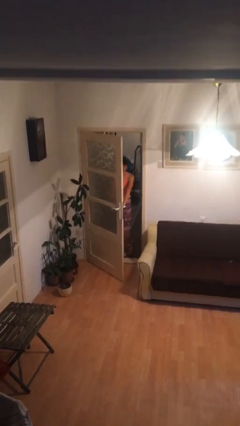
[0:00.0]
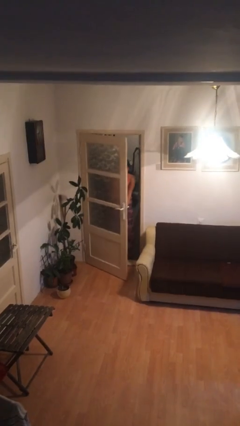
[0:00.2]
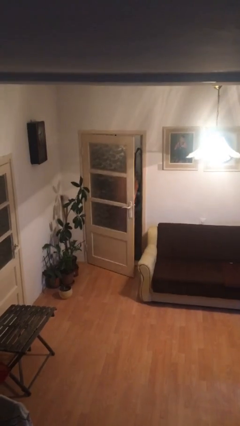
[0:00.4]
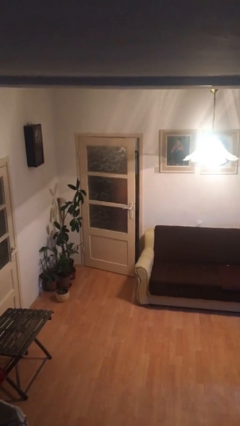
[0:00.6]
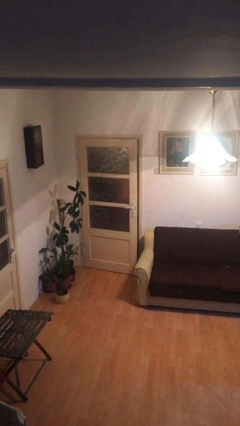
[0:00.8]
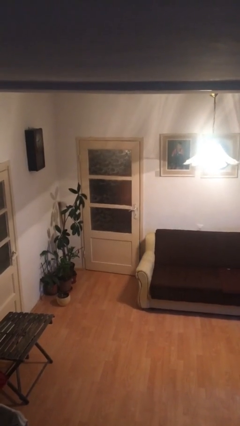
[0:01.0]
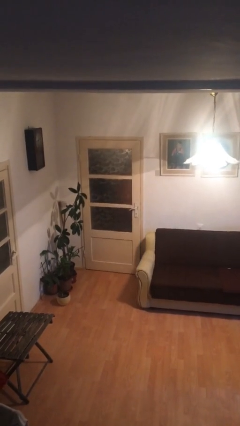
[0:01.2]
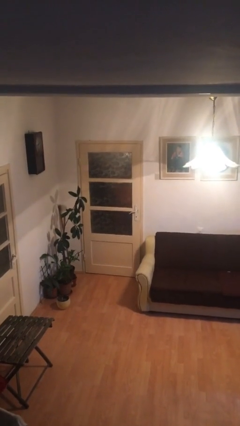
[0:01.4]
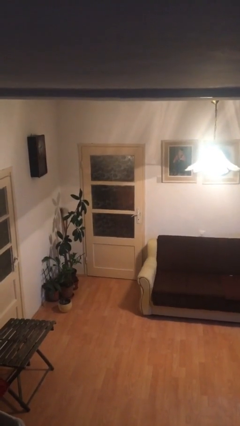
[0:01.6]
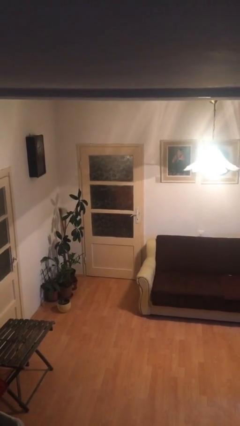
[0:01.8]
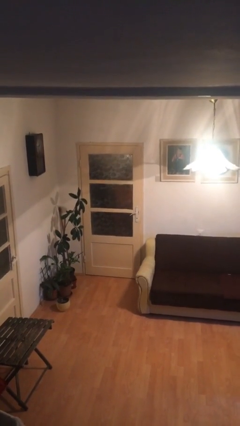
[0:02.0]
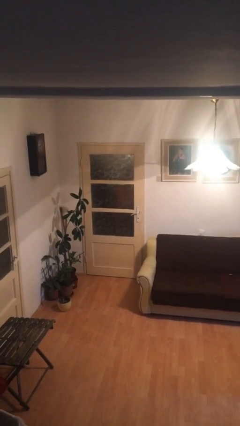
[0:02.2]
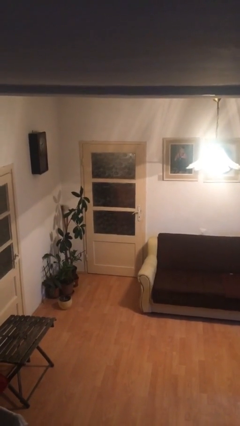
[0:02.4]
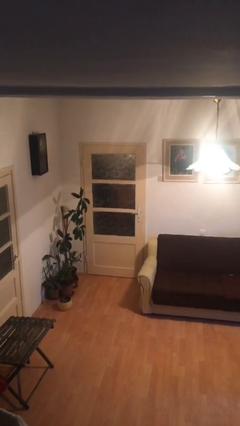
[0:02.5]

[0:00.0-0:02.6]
person closes facility door

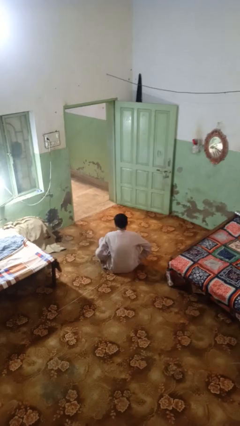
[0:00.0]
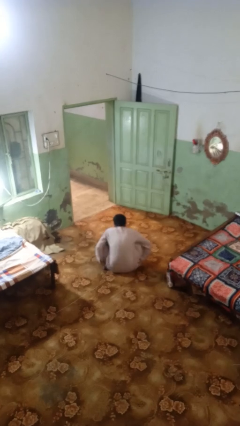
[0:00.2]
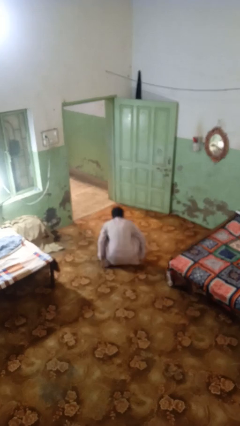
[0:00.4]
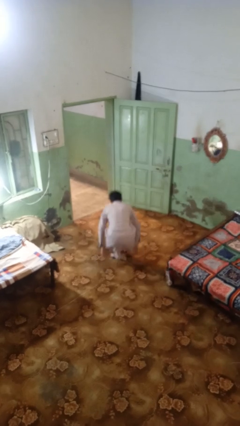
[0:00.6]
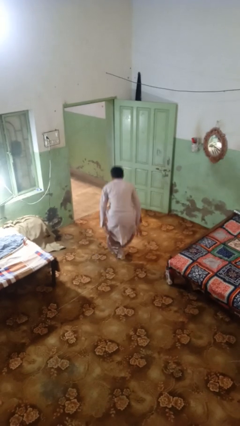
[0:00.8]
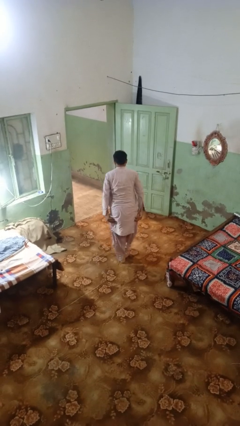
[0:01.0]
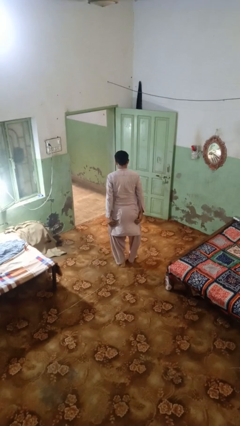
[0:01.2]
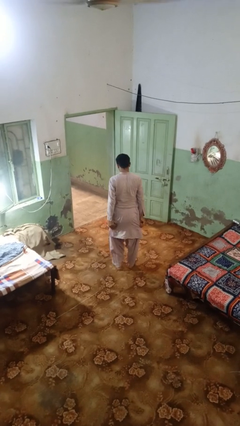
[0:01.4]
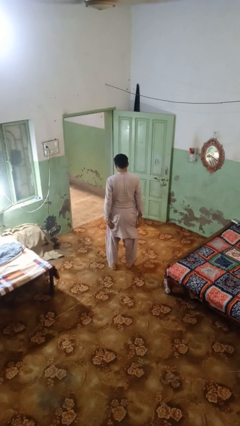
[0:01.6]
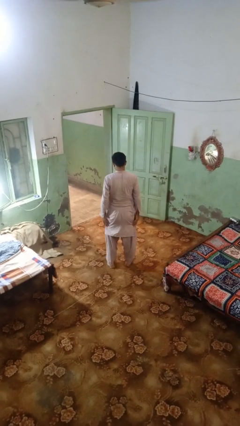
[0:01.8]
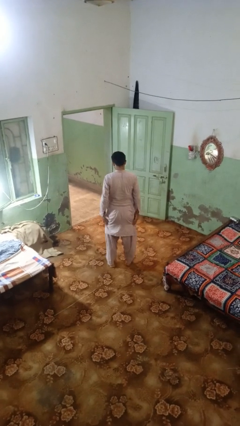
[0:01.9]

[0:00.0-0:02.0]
person stands up from floor

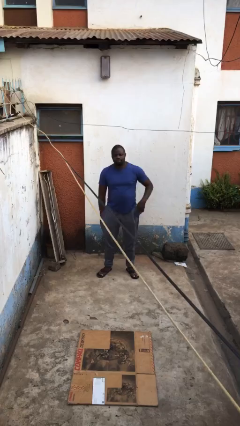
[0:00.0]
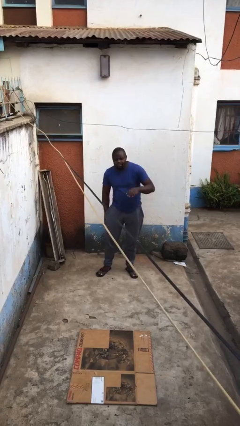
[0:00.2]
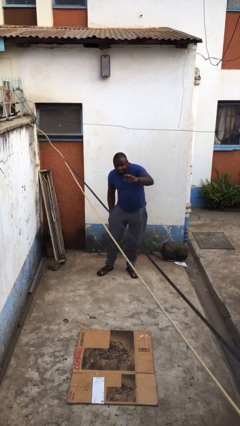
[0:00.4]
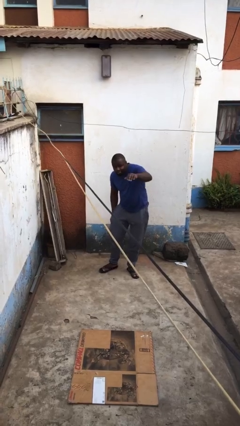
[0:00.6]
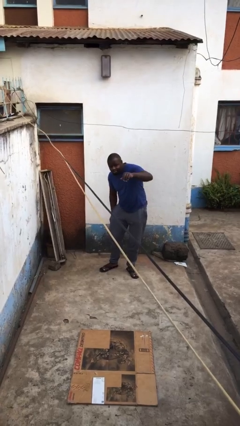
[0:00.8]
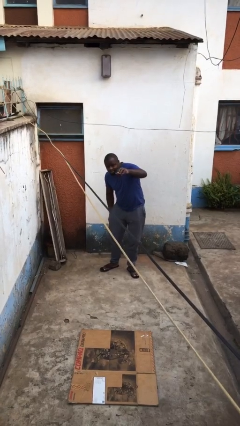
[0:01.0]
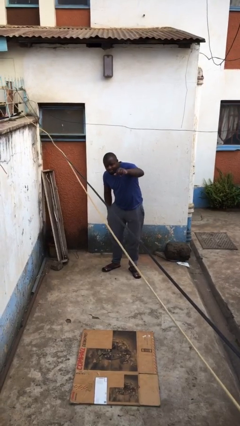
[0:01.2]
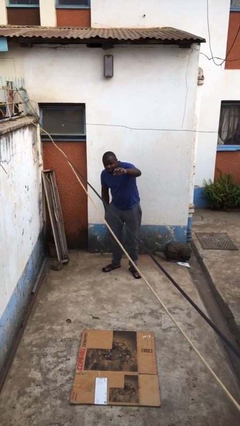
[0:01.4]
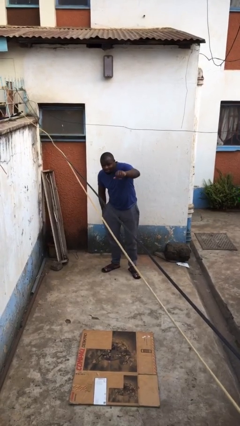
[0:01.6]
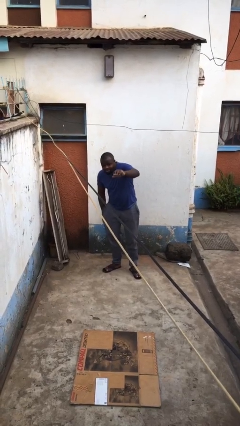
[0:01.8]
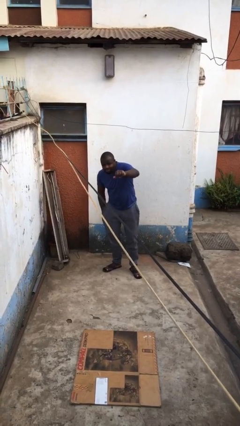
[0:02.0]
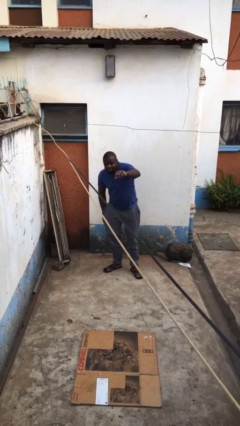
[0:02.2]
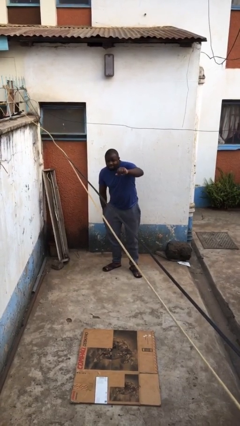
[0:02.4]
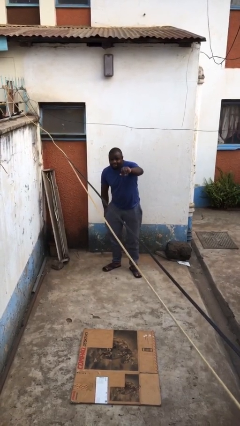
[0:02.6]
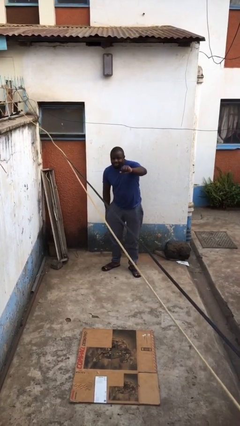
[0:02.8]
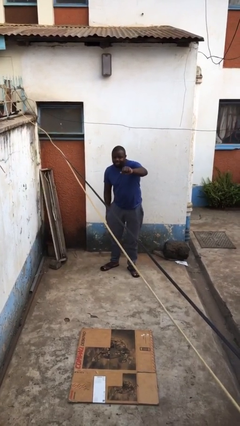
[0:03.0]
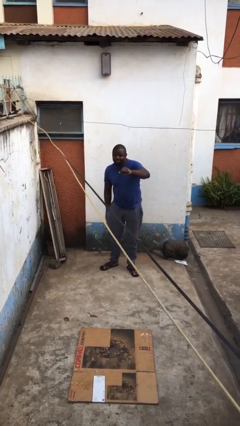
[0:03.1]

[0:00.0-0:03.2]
person gestures come here

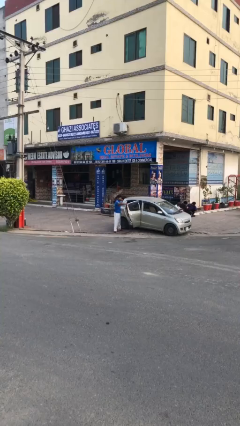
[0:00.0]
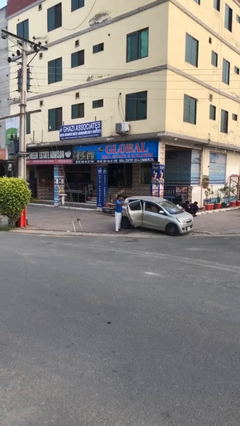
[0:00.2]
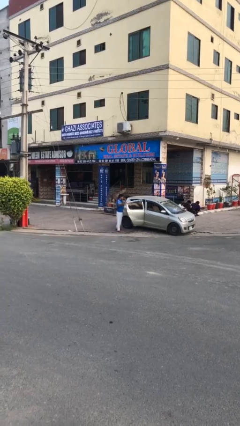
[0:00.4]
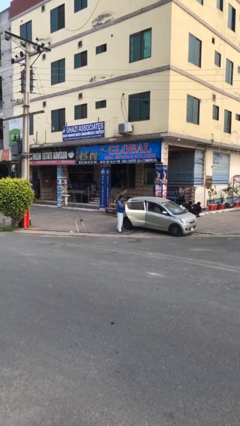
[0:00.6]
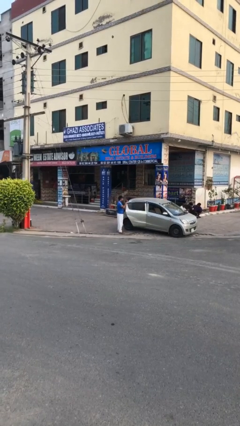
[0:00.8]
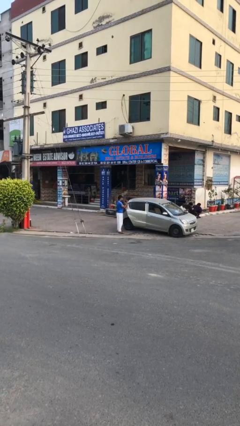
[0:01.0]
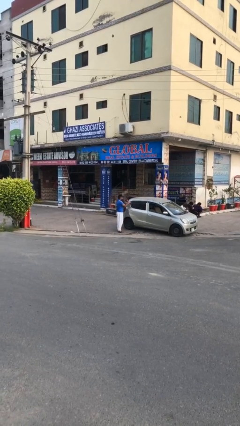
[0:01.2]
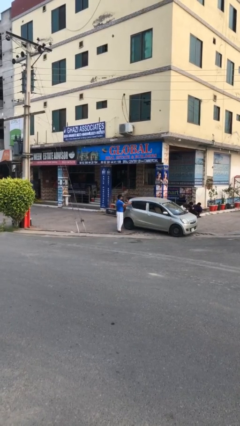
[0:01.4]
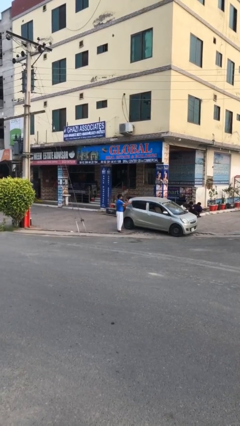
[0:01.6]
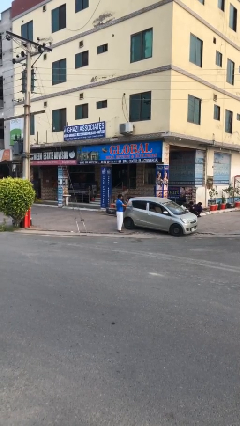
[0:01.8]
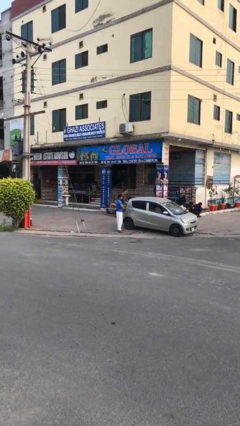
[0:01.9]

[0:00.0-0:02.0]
person closes car door

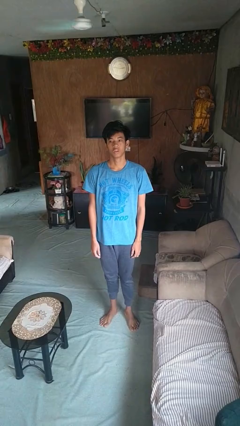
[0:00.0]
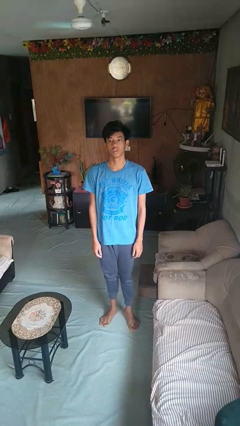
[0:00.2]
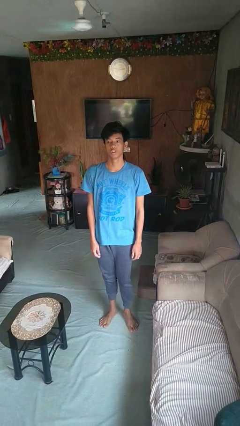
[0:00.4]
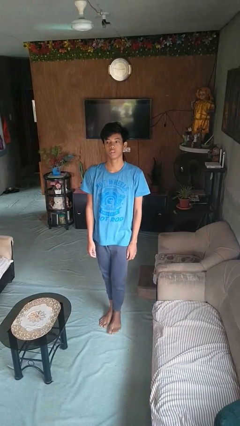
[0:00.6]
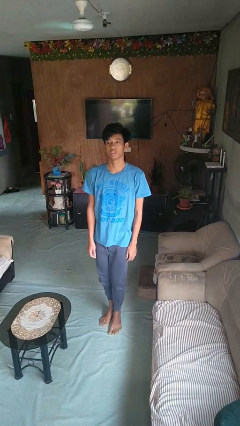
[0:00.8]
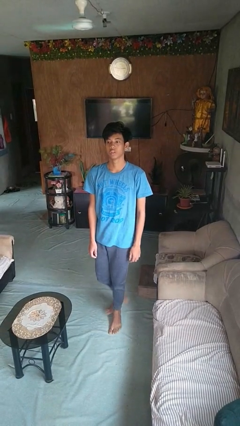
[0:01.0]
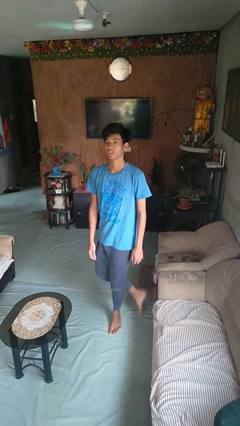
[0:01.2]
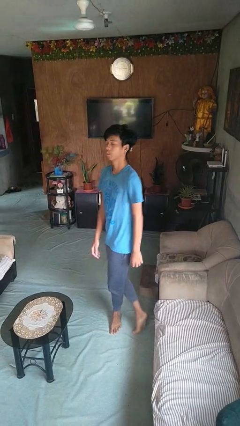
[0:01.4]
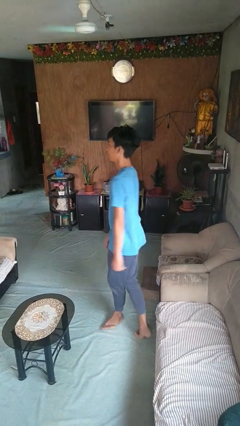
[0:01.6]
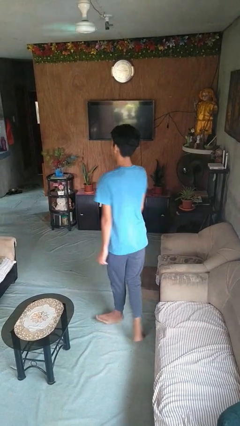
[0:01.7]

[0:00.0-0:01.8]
person twirls

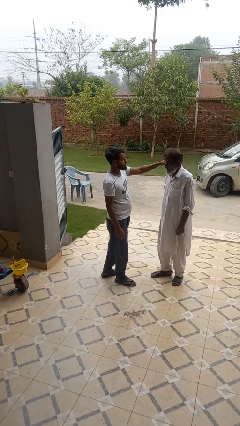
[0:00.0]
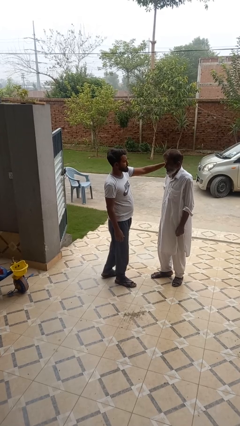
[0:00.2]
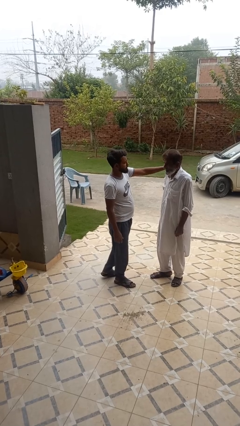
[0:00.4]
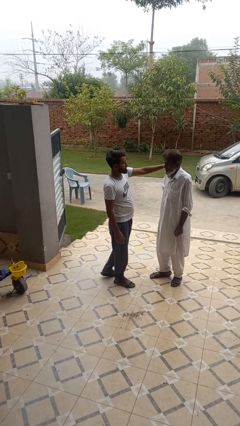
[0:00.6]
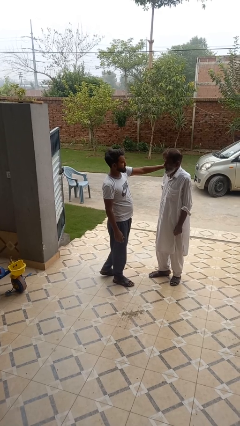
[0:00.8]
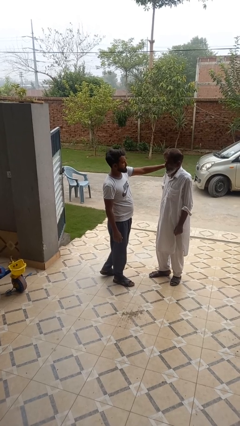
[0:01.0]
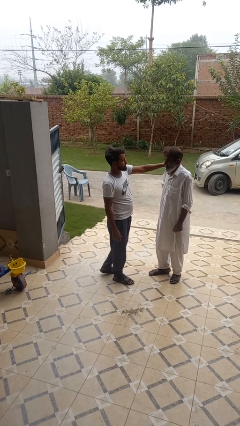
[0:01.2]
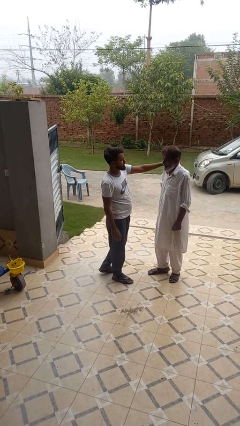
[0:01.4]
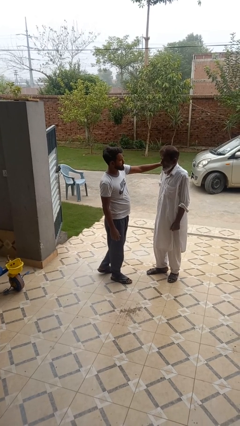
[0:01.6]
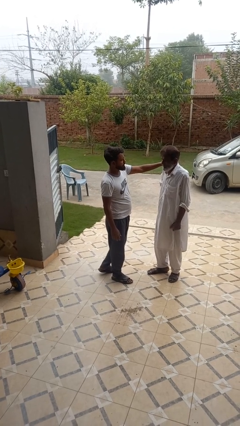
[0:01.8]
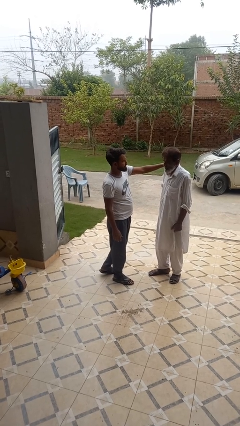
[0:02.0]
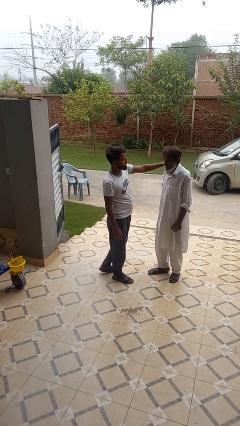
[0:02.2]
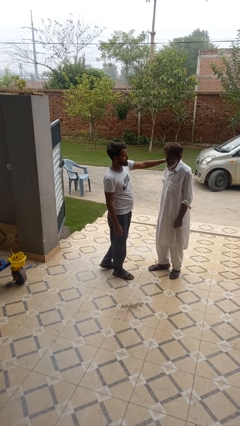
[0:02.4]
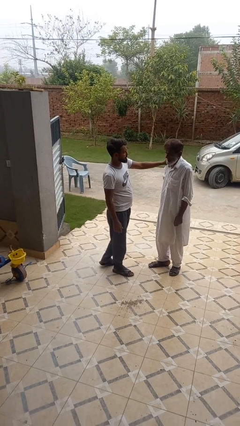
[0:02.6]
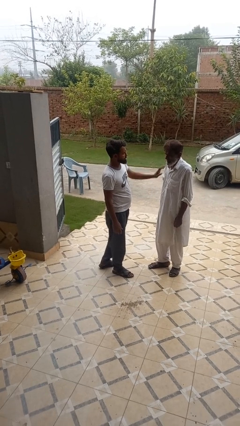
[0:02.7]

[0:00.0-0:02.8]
person pounds shoulders of person

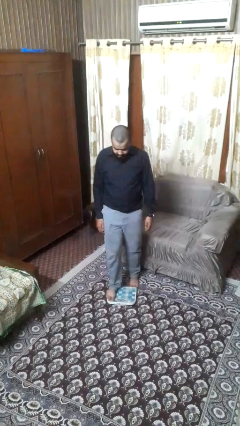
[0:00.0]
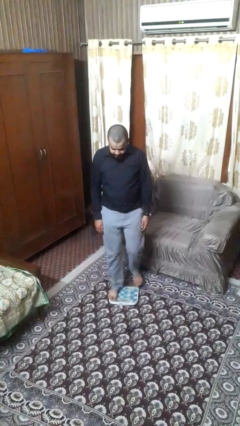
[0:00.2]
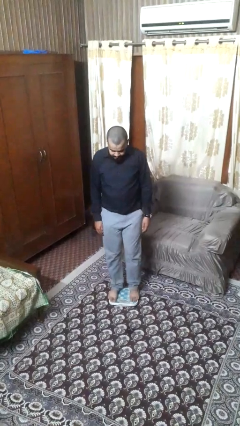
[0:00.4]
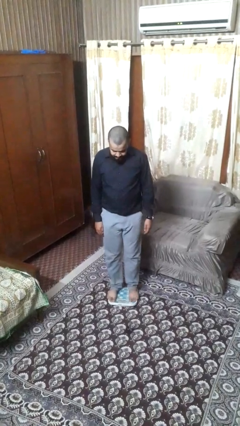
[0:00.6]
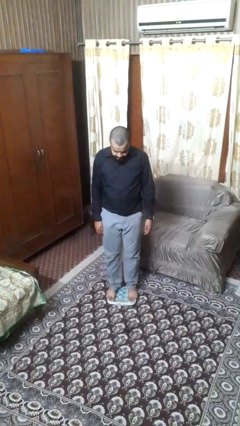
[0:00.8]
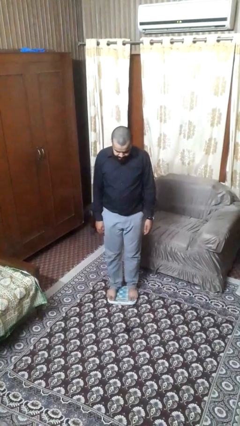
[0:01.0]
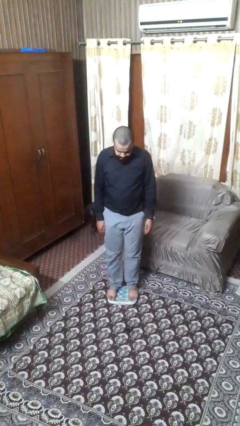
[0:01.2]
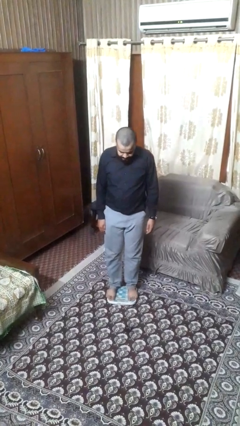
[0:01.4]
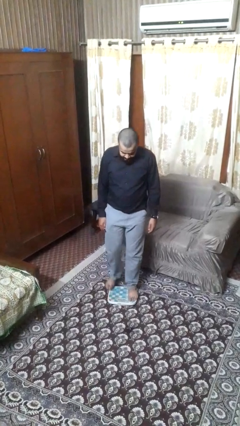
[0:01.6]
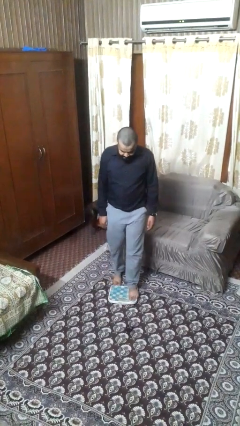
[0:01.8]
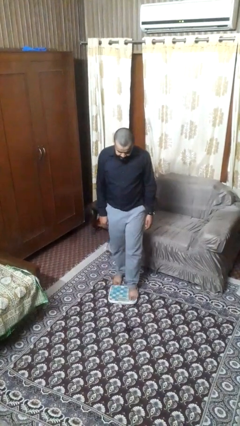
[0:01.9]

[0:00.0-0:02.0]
person uses bodyweight scale

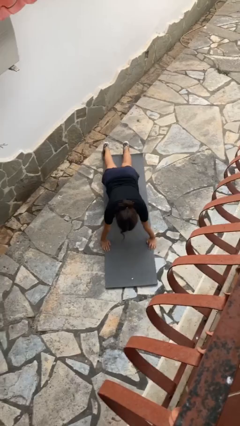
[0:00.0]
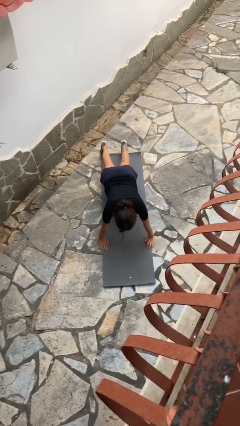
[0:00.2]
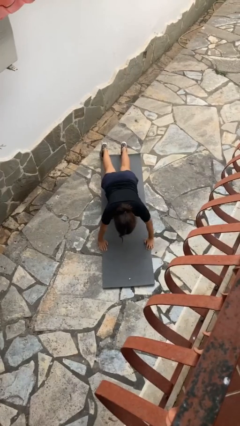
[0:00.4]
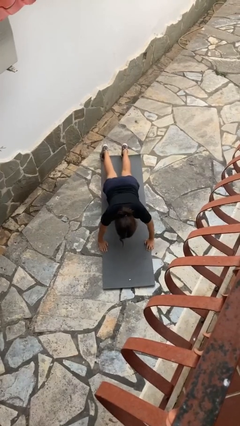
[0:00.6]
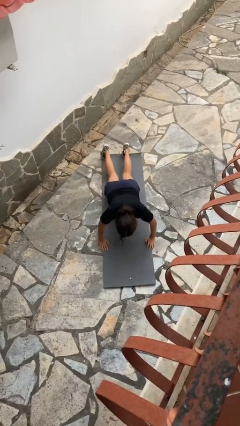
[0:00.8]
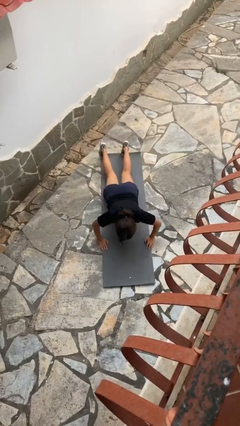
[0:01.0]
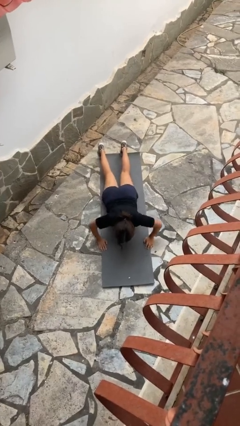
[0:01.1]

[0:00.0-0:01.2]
person exercises with pushup
